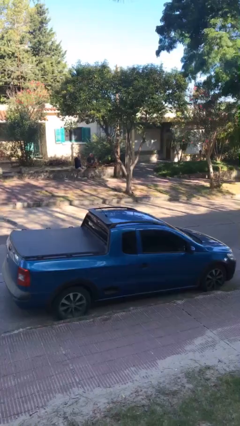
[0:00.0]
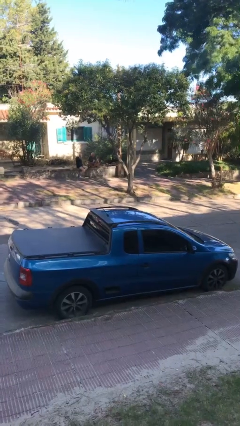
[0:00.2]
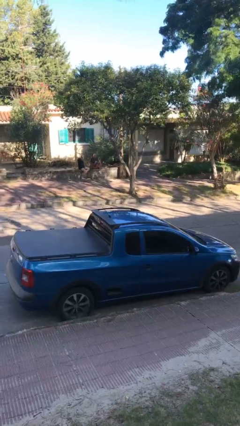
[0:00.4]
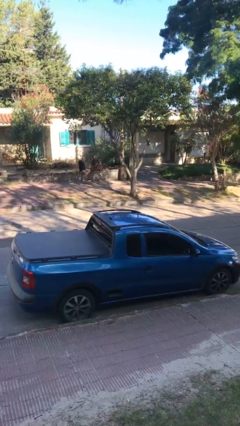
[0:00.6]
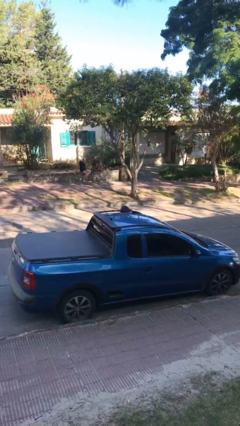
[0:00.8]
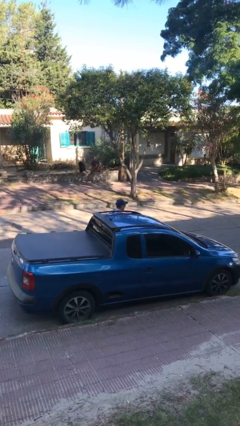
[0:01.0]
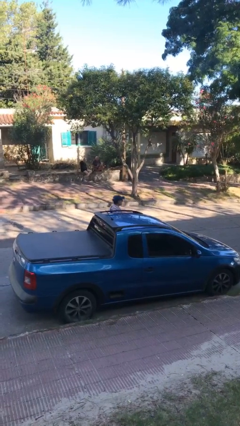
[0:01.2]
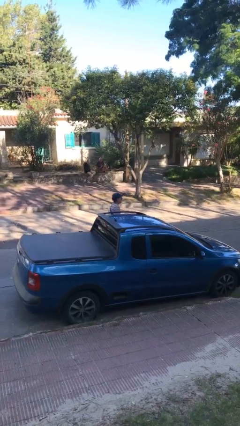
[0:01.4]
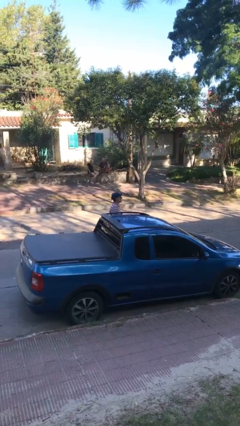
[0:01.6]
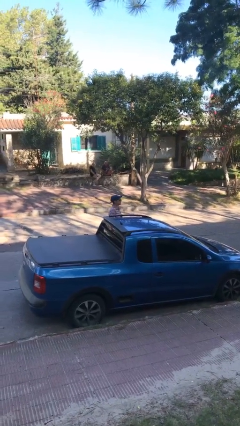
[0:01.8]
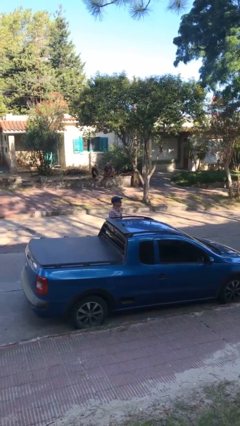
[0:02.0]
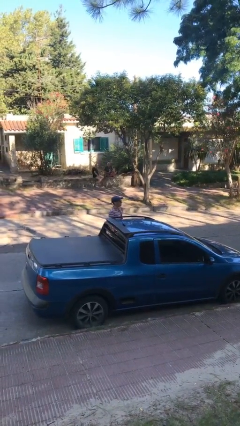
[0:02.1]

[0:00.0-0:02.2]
person exits car

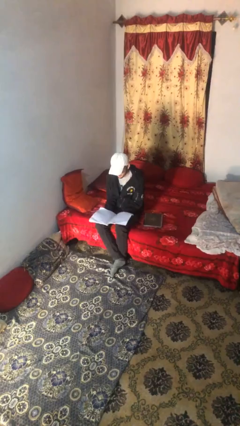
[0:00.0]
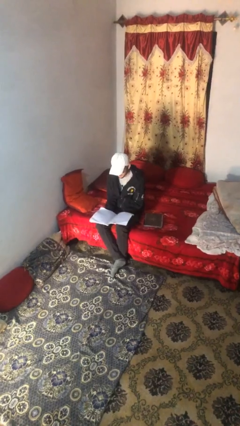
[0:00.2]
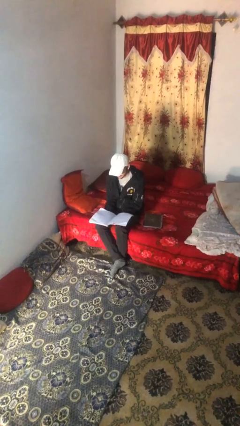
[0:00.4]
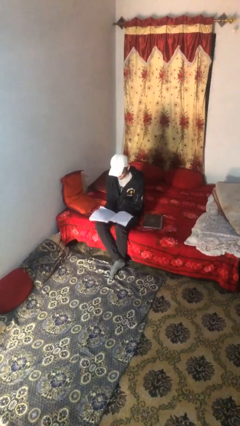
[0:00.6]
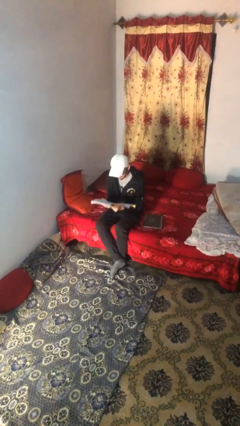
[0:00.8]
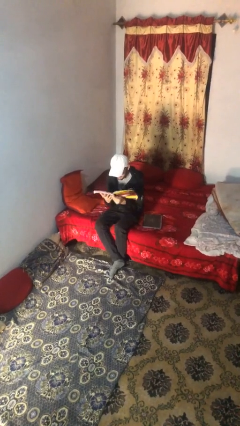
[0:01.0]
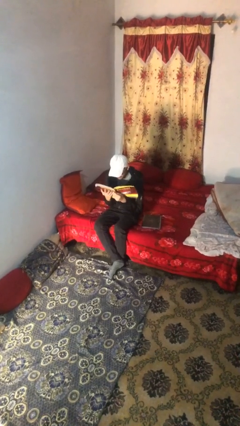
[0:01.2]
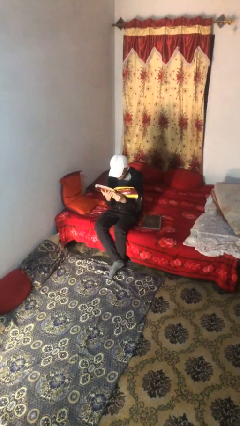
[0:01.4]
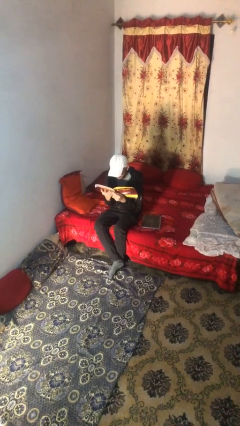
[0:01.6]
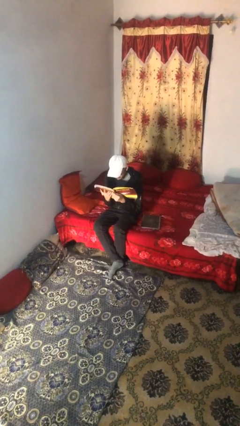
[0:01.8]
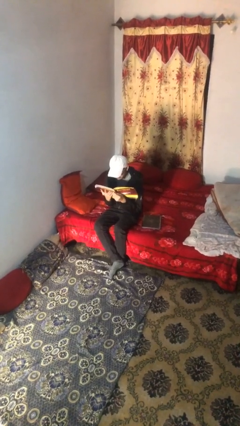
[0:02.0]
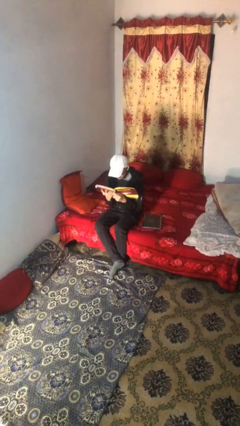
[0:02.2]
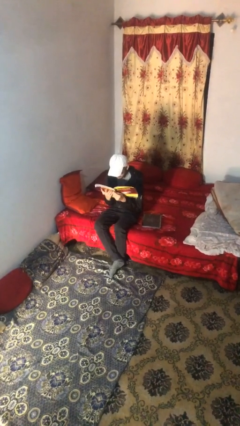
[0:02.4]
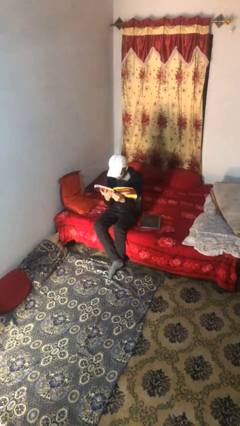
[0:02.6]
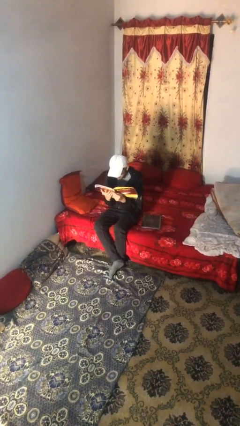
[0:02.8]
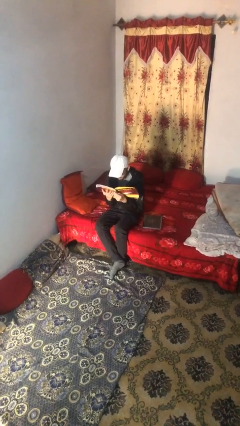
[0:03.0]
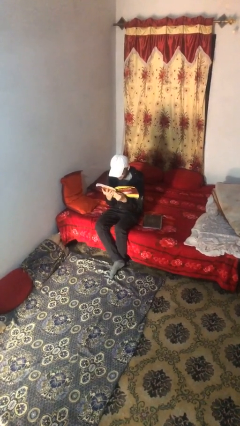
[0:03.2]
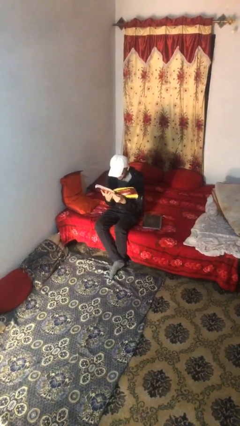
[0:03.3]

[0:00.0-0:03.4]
person reads document

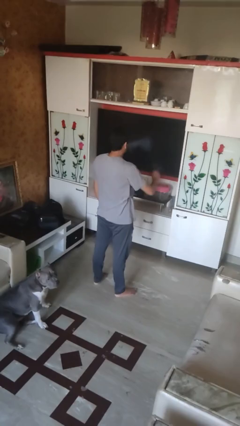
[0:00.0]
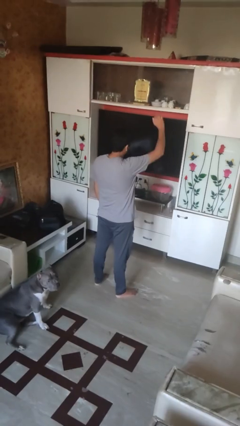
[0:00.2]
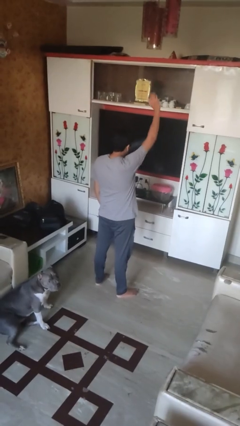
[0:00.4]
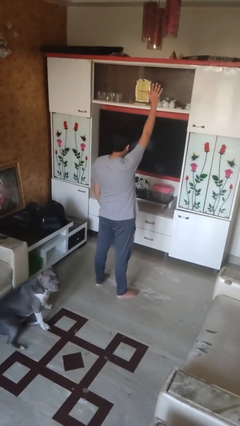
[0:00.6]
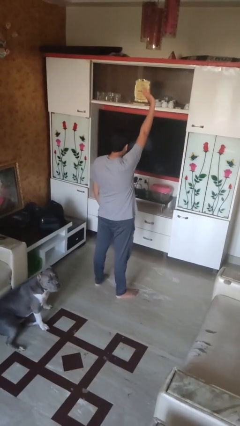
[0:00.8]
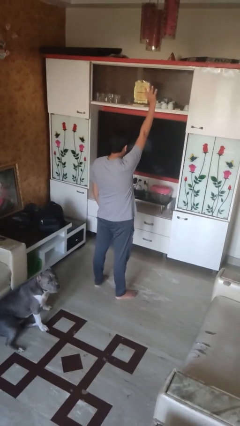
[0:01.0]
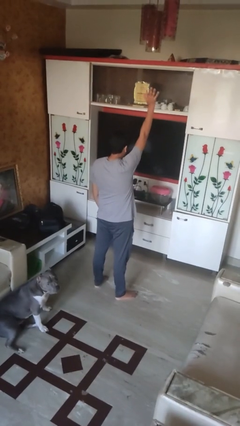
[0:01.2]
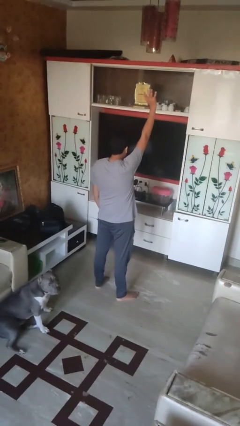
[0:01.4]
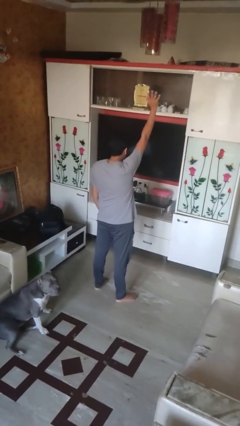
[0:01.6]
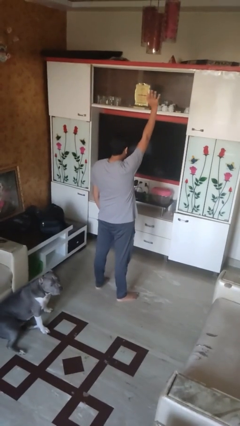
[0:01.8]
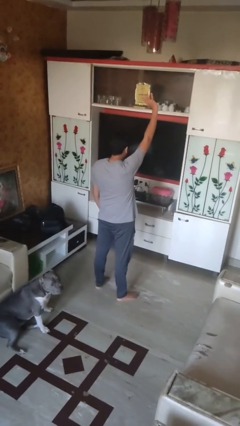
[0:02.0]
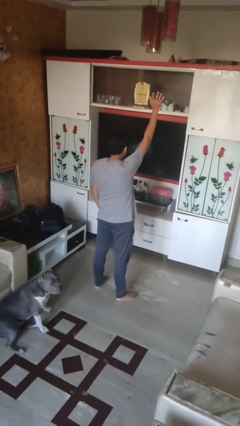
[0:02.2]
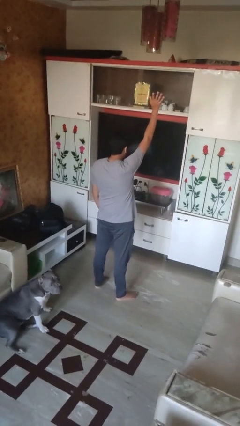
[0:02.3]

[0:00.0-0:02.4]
person waves at person

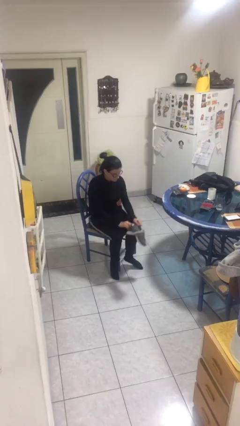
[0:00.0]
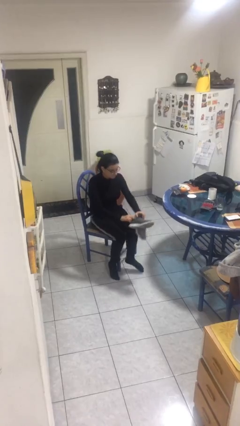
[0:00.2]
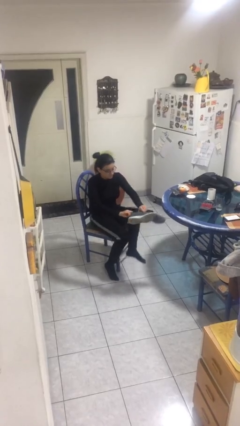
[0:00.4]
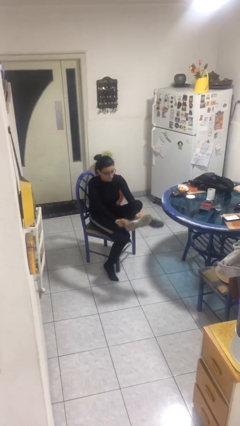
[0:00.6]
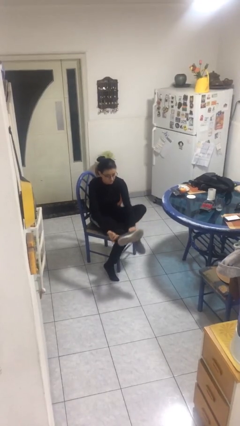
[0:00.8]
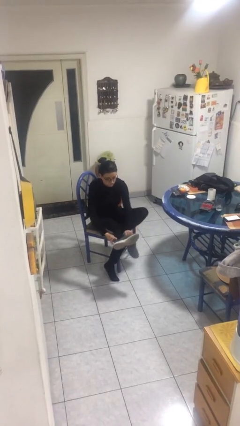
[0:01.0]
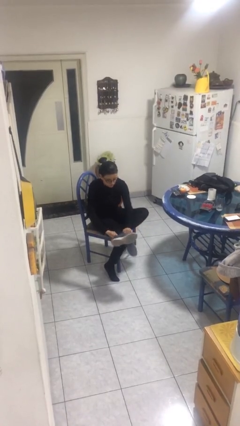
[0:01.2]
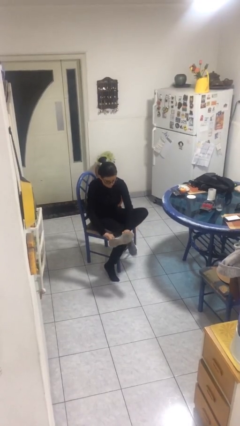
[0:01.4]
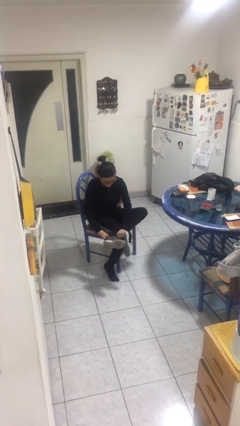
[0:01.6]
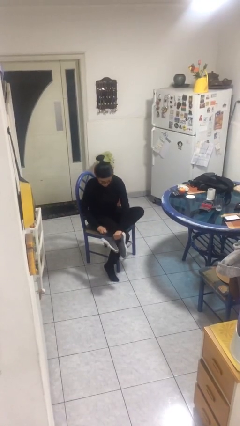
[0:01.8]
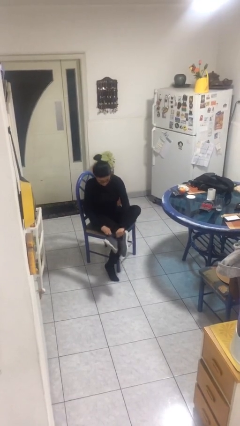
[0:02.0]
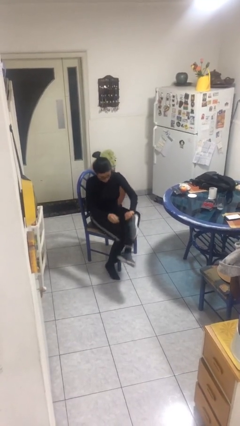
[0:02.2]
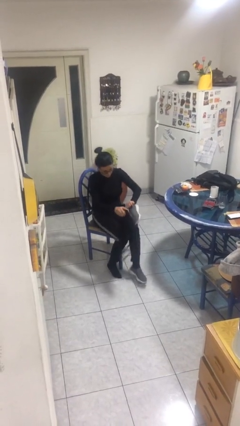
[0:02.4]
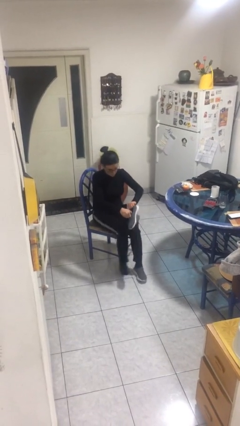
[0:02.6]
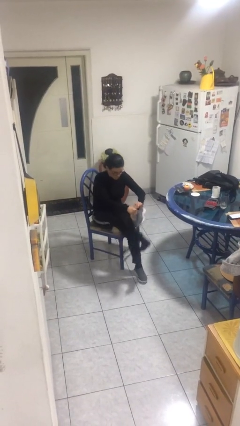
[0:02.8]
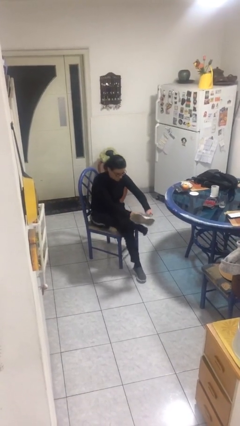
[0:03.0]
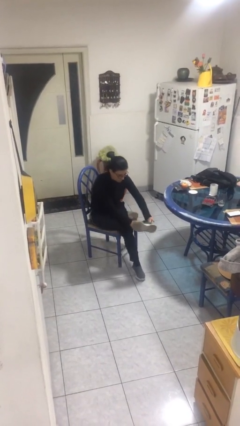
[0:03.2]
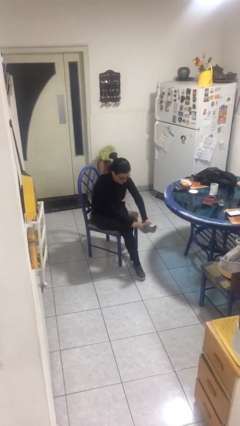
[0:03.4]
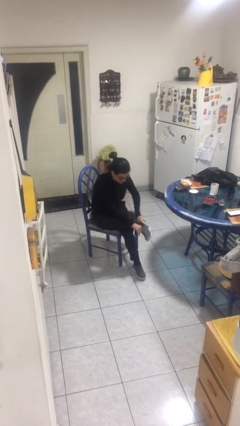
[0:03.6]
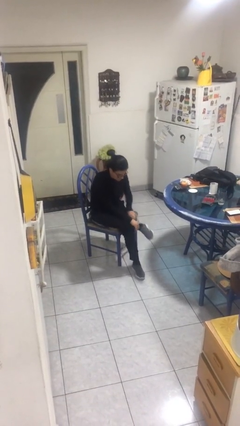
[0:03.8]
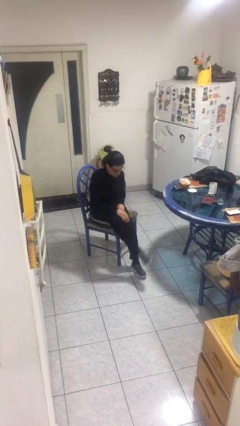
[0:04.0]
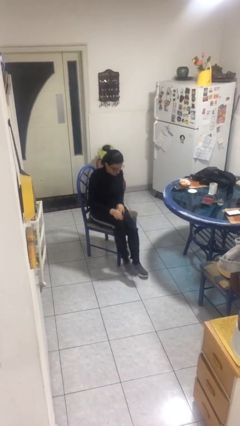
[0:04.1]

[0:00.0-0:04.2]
person puts on shoes

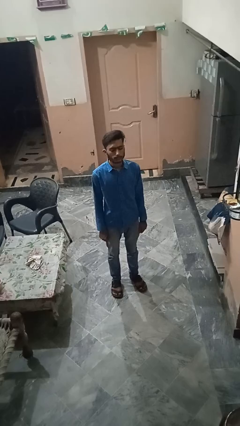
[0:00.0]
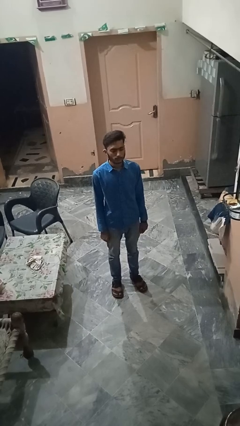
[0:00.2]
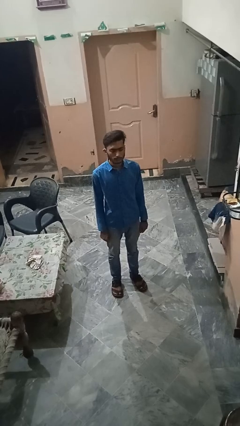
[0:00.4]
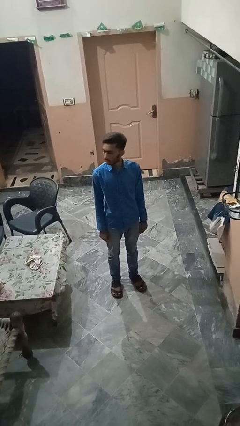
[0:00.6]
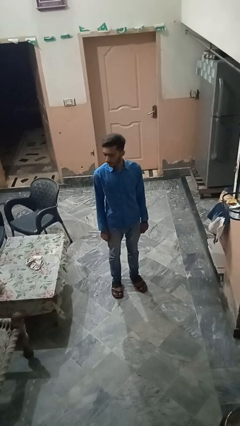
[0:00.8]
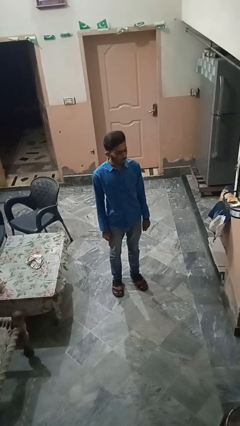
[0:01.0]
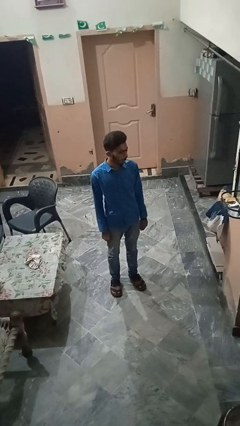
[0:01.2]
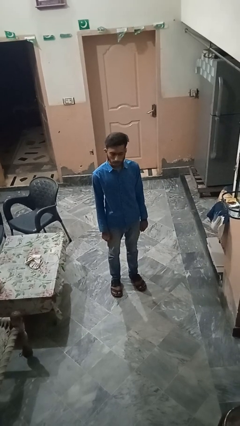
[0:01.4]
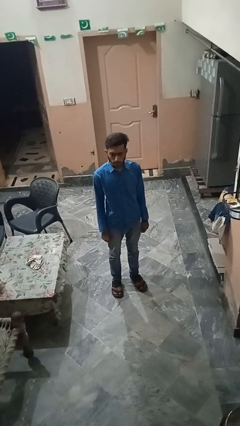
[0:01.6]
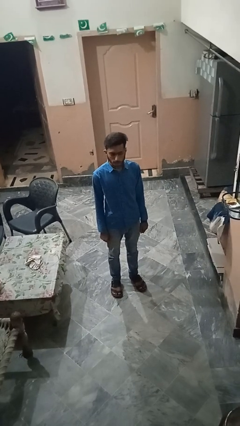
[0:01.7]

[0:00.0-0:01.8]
person shakes head

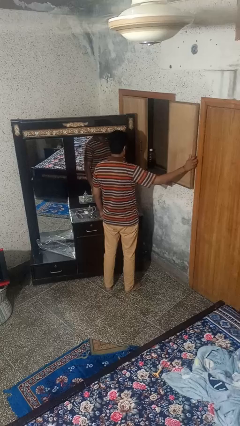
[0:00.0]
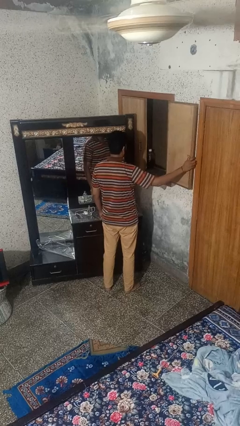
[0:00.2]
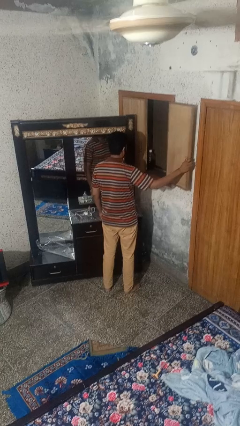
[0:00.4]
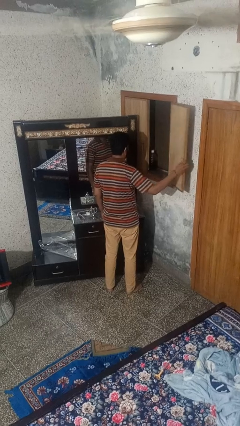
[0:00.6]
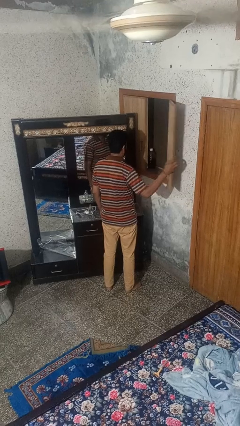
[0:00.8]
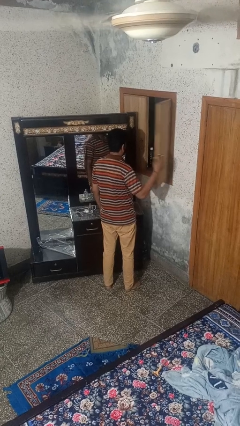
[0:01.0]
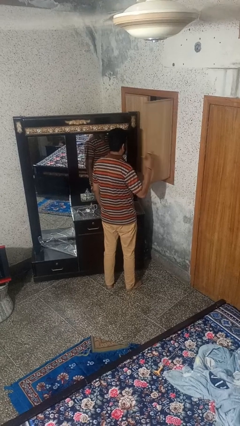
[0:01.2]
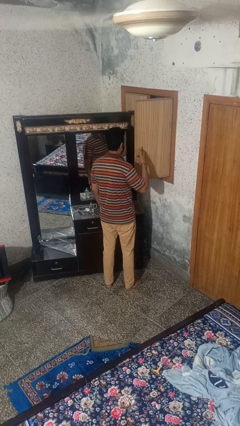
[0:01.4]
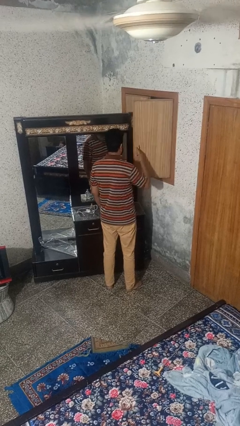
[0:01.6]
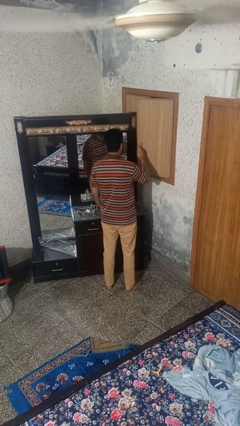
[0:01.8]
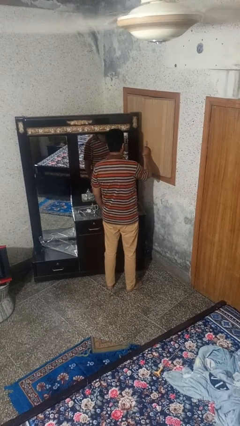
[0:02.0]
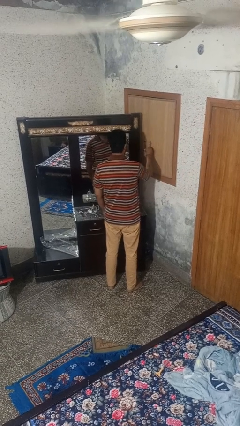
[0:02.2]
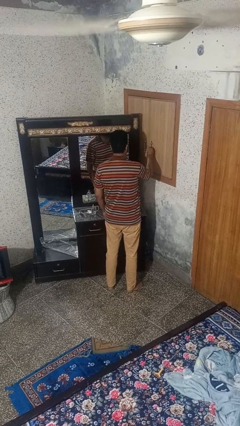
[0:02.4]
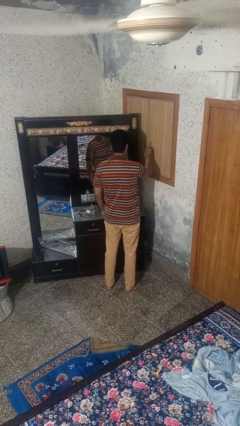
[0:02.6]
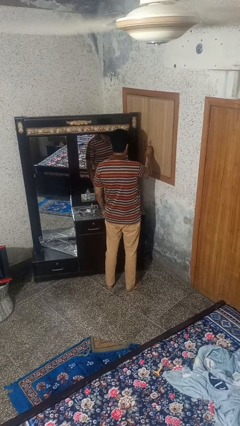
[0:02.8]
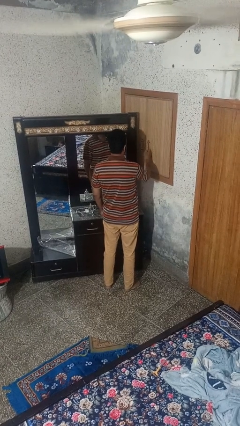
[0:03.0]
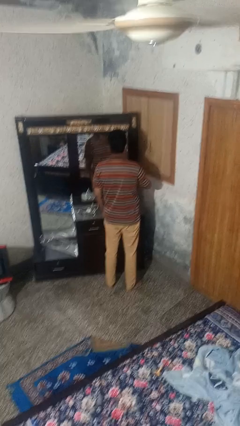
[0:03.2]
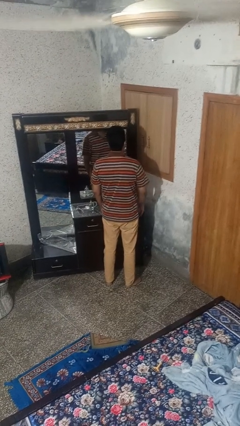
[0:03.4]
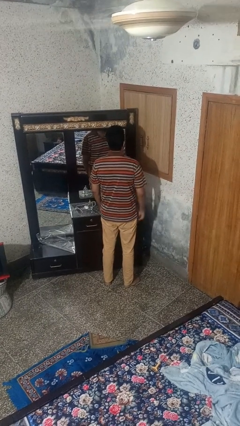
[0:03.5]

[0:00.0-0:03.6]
person closes home window
